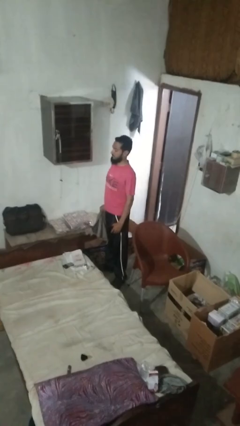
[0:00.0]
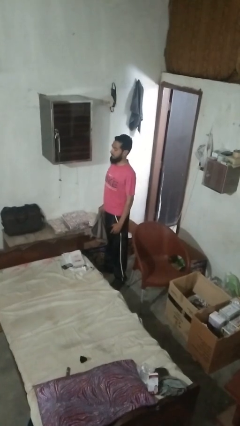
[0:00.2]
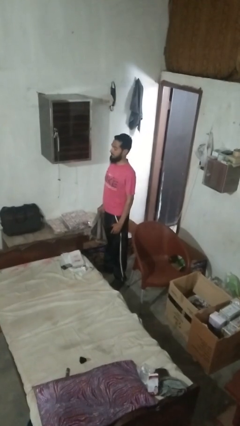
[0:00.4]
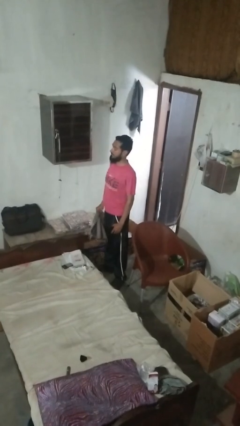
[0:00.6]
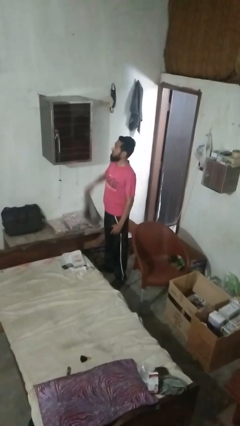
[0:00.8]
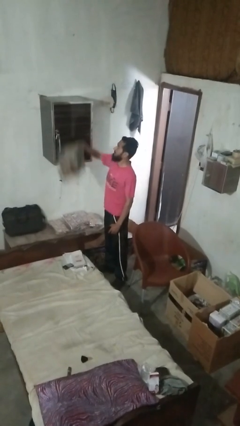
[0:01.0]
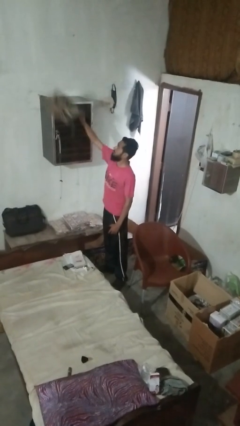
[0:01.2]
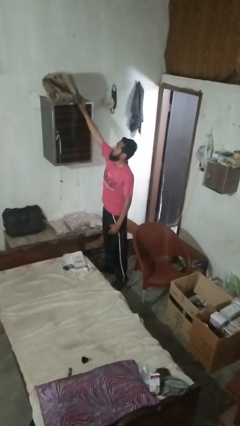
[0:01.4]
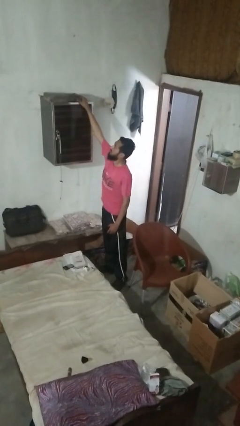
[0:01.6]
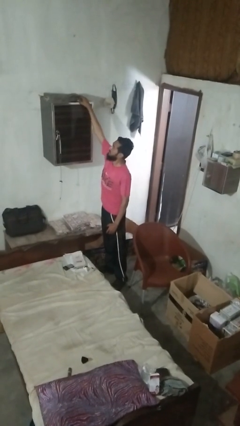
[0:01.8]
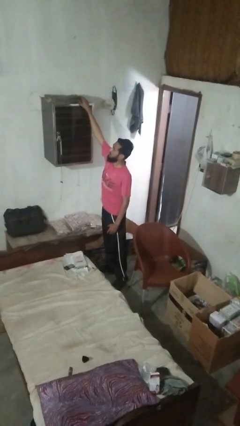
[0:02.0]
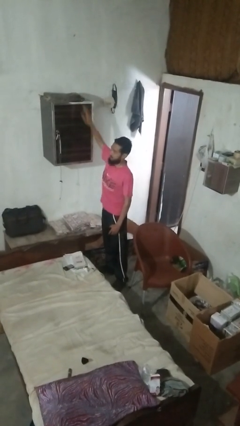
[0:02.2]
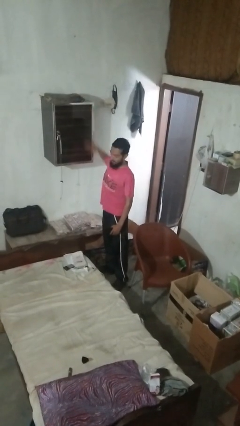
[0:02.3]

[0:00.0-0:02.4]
person puts down object on shelf

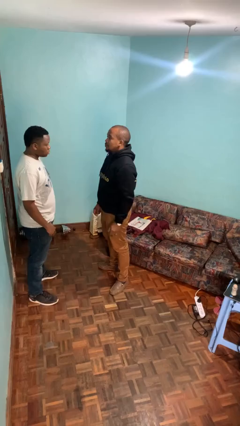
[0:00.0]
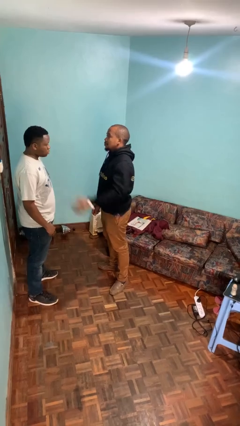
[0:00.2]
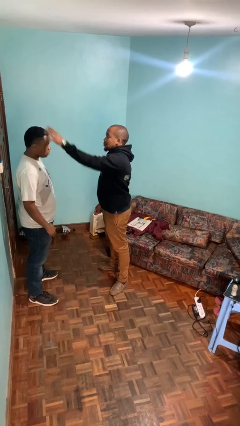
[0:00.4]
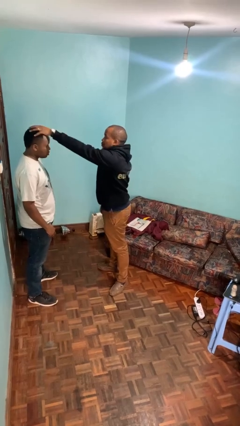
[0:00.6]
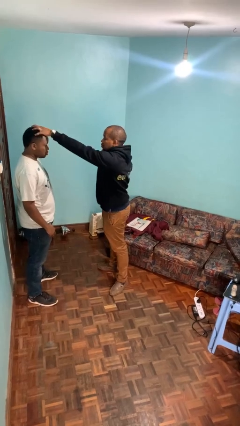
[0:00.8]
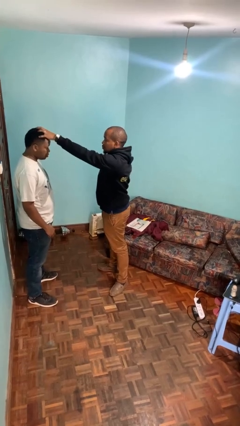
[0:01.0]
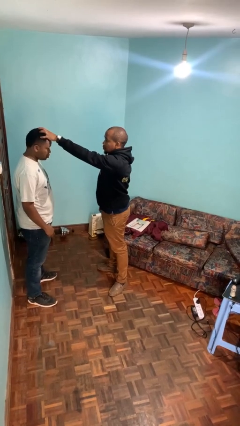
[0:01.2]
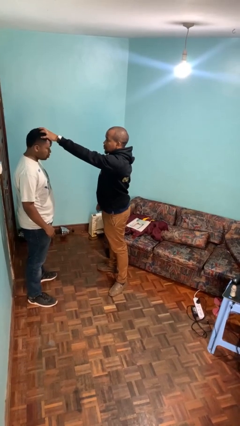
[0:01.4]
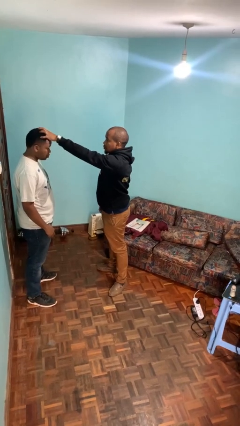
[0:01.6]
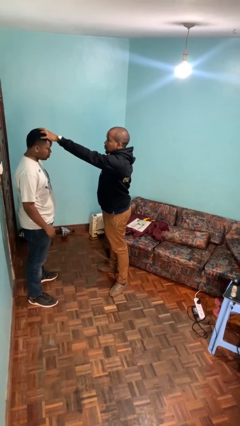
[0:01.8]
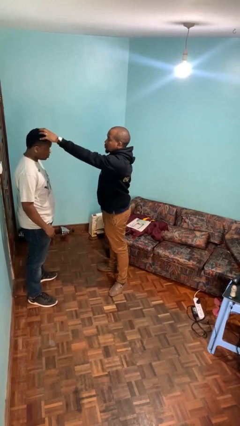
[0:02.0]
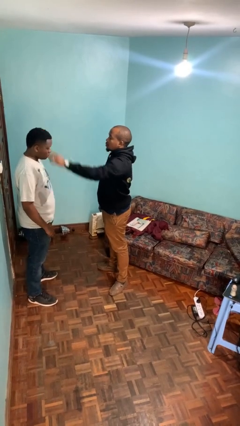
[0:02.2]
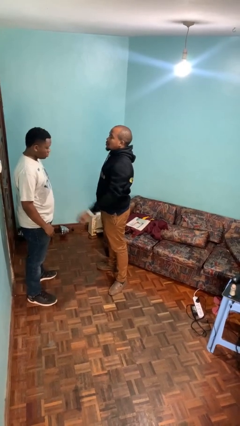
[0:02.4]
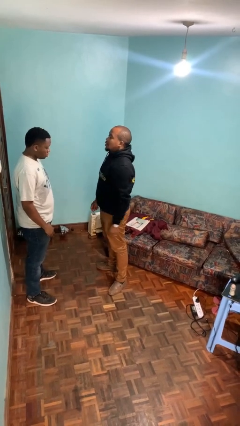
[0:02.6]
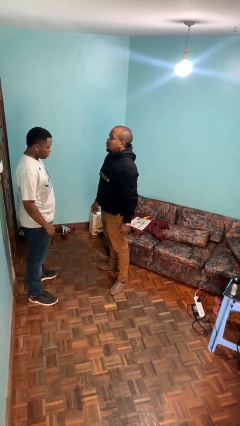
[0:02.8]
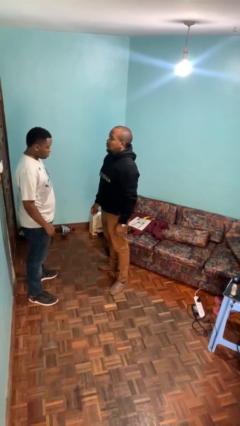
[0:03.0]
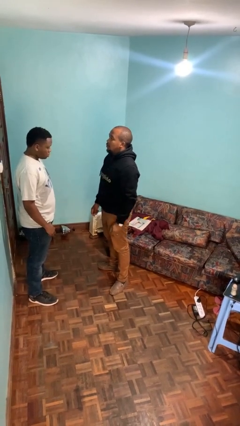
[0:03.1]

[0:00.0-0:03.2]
person grabs person by hair

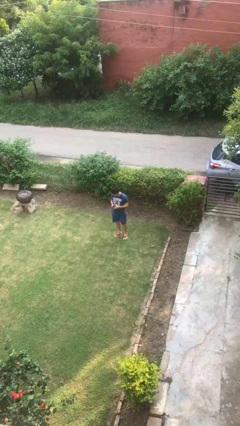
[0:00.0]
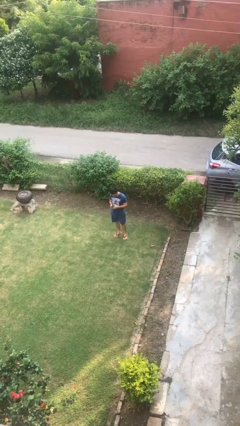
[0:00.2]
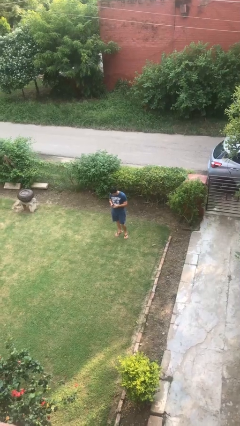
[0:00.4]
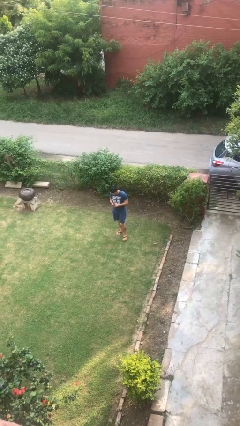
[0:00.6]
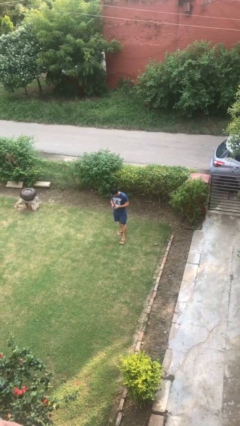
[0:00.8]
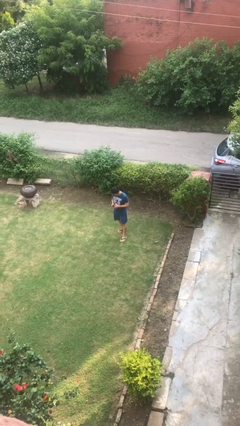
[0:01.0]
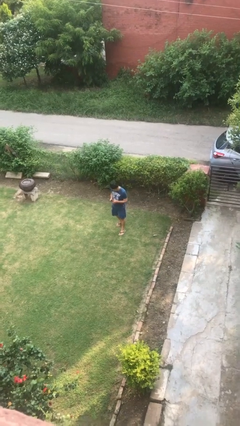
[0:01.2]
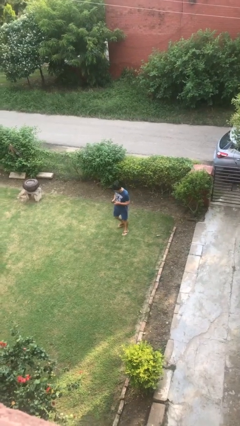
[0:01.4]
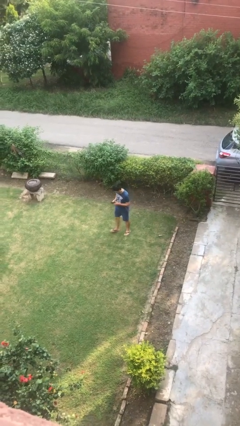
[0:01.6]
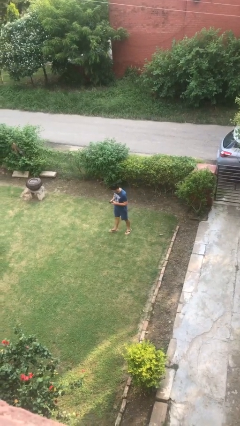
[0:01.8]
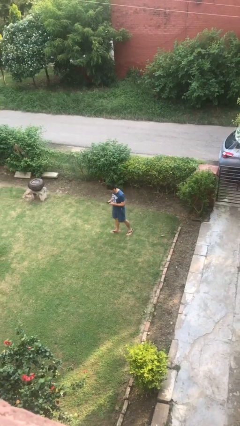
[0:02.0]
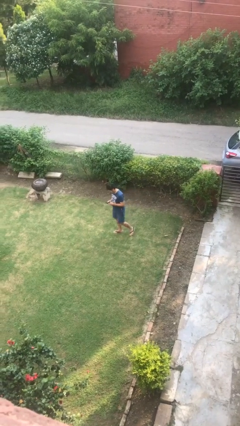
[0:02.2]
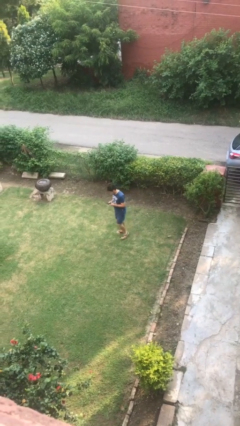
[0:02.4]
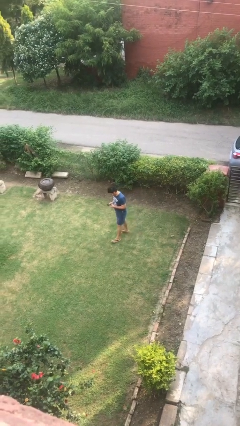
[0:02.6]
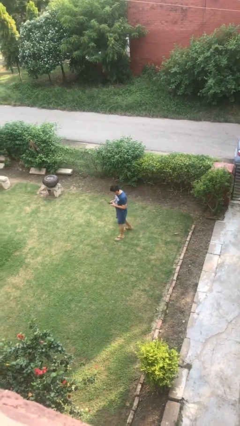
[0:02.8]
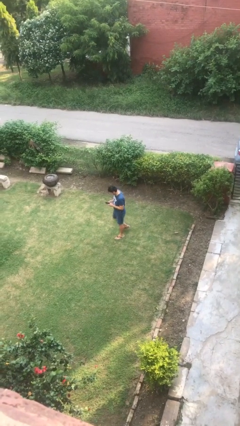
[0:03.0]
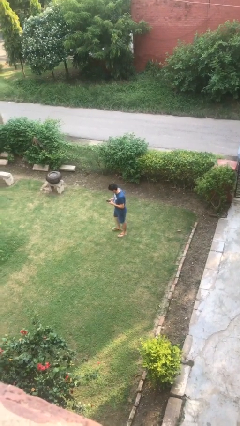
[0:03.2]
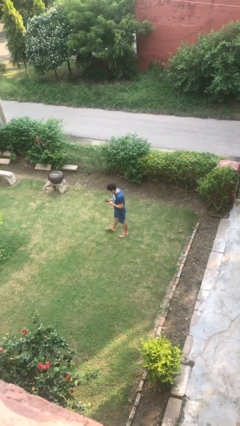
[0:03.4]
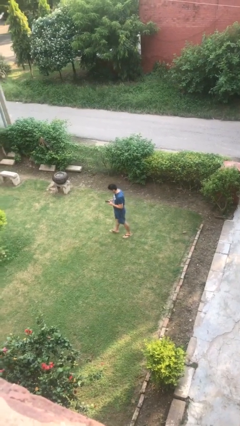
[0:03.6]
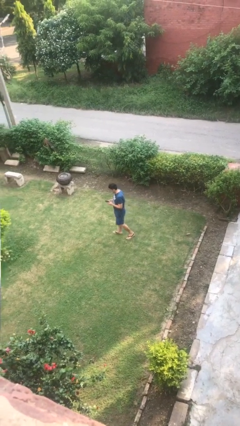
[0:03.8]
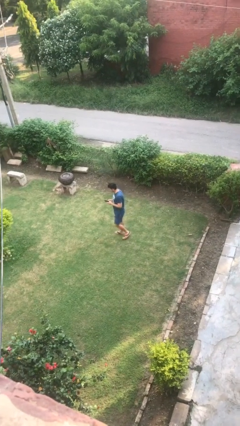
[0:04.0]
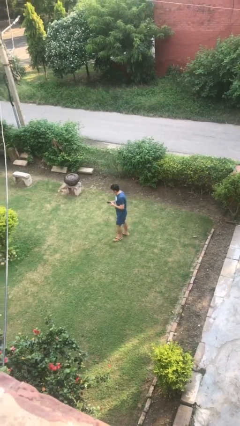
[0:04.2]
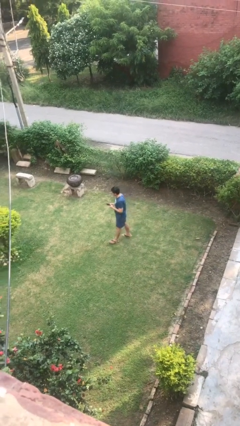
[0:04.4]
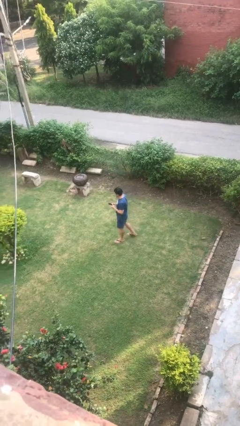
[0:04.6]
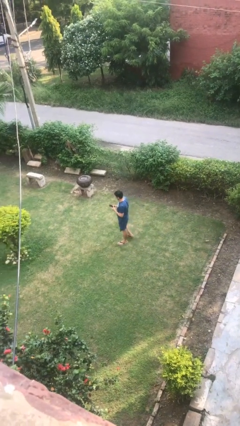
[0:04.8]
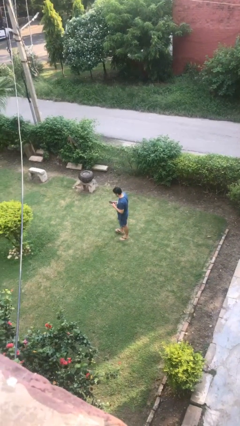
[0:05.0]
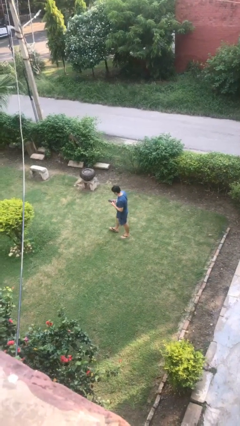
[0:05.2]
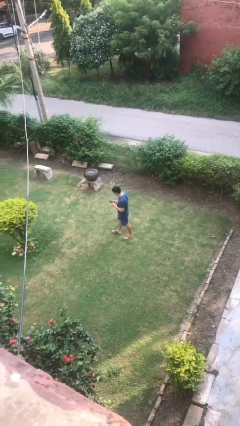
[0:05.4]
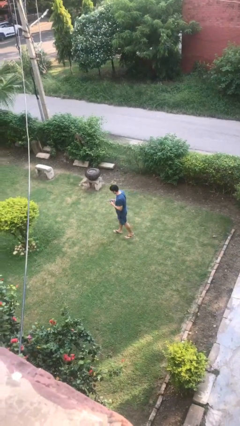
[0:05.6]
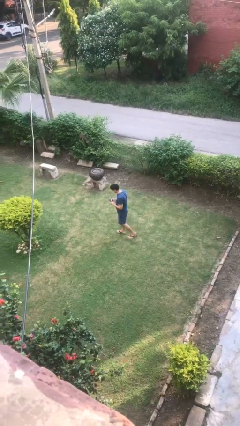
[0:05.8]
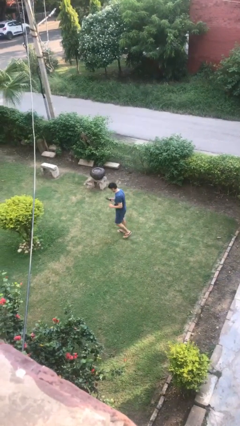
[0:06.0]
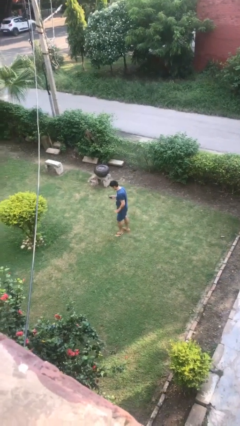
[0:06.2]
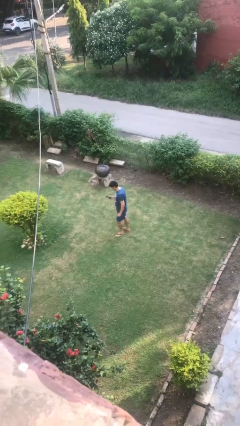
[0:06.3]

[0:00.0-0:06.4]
person texts on phone

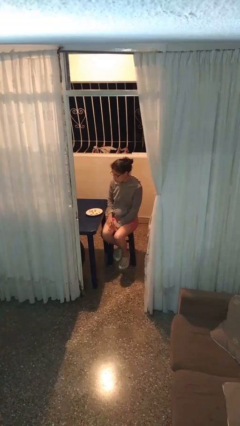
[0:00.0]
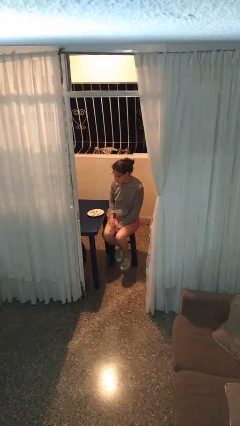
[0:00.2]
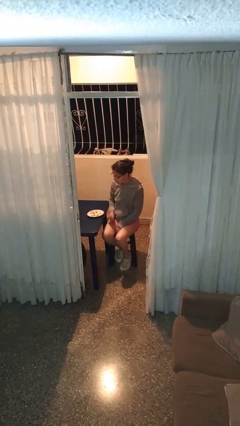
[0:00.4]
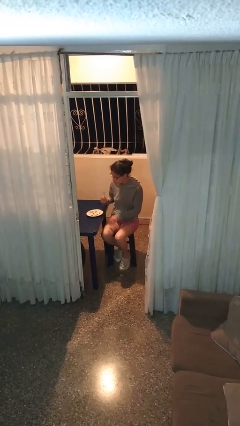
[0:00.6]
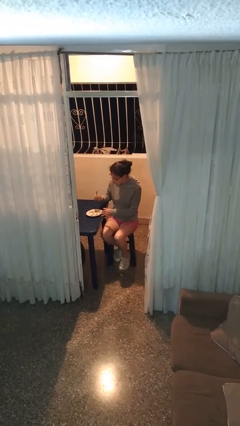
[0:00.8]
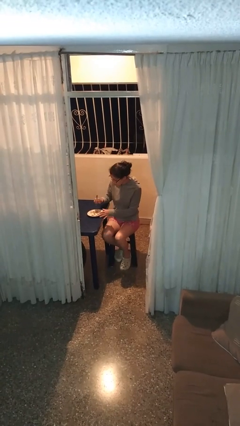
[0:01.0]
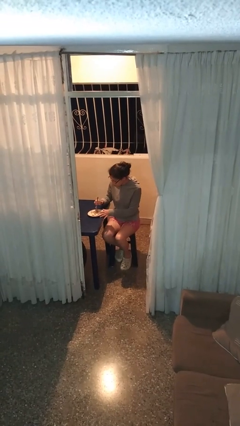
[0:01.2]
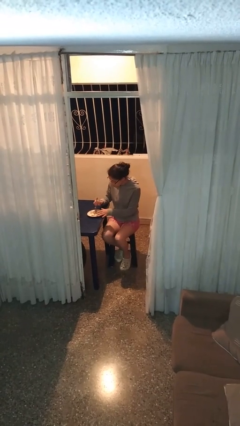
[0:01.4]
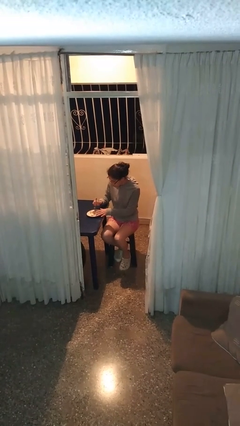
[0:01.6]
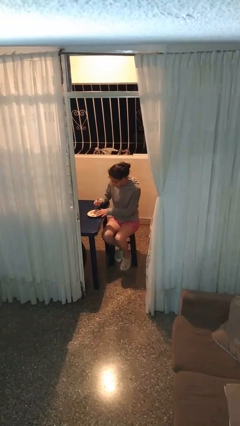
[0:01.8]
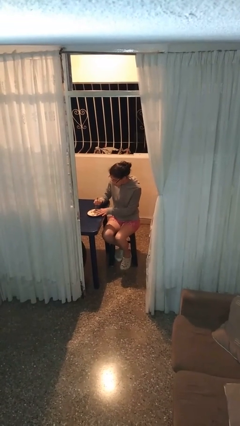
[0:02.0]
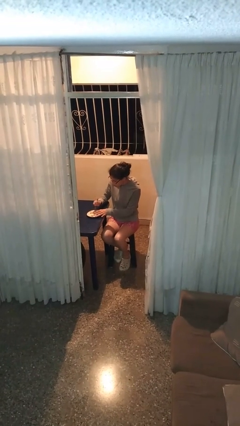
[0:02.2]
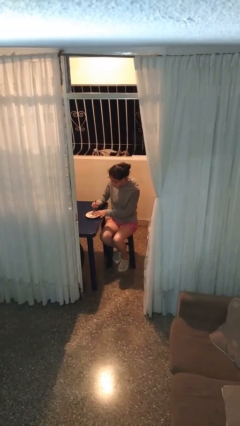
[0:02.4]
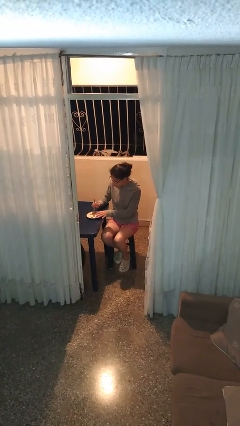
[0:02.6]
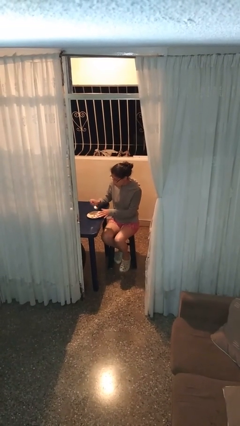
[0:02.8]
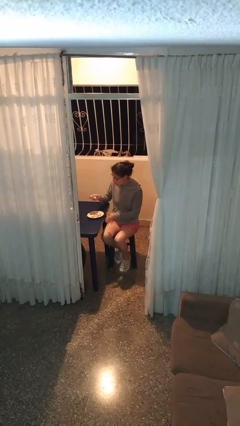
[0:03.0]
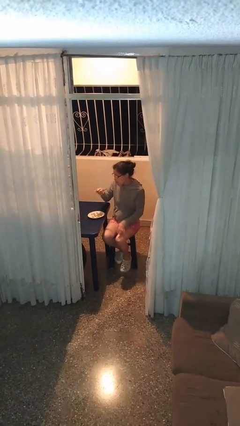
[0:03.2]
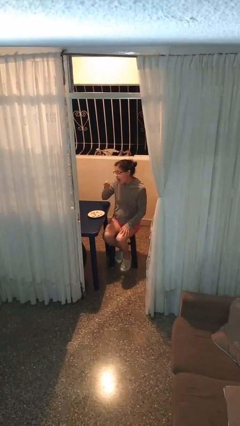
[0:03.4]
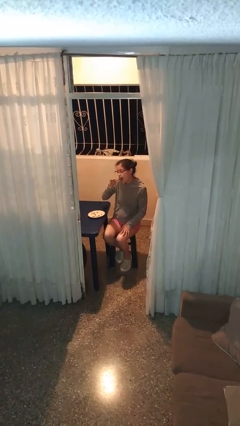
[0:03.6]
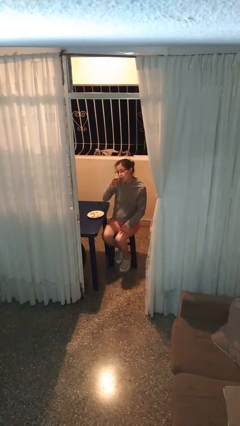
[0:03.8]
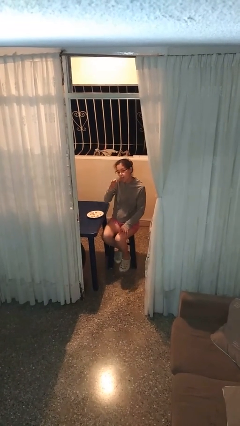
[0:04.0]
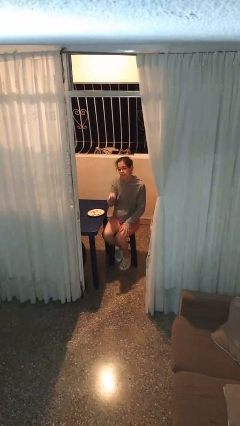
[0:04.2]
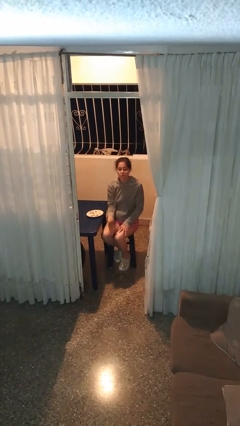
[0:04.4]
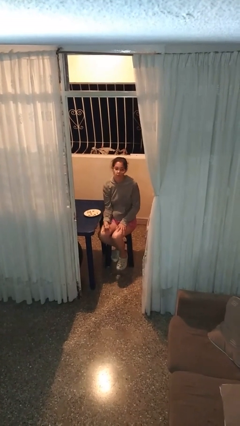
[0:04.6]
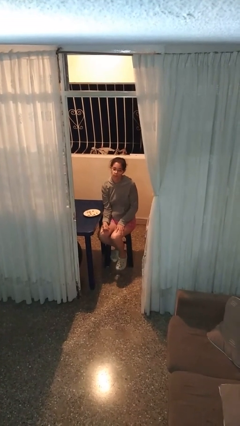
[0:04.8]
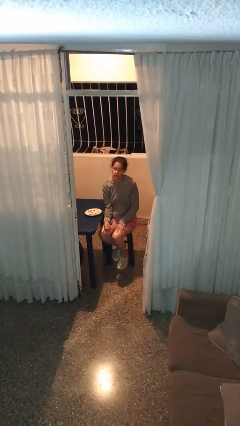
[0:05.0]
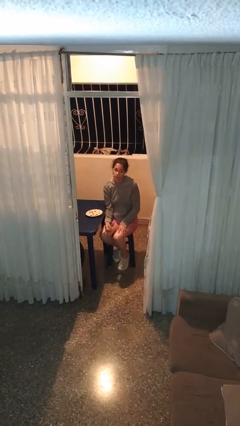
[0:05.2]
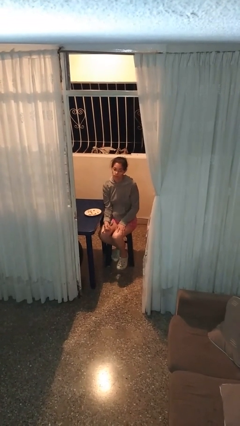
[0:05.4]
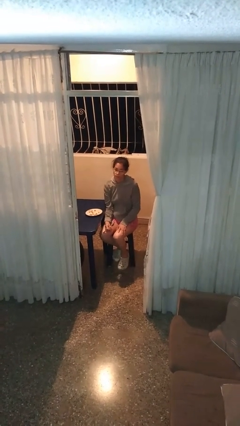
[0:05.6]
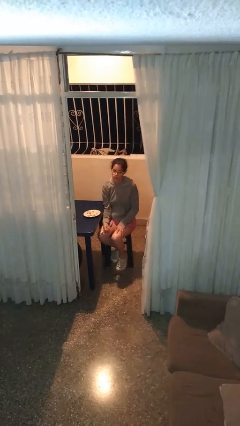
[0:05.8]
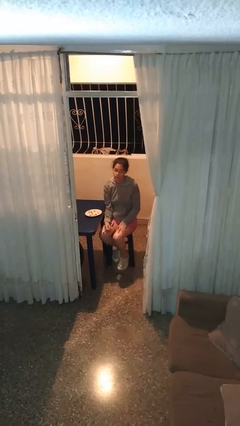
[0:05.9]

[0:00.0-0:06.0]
person eats with utensil
